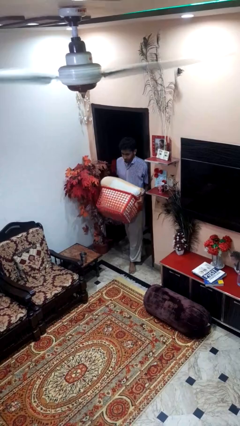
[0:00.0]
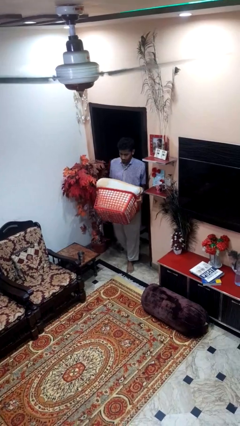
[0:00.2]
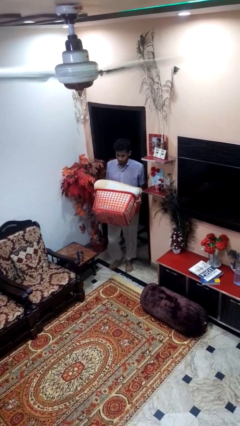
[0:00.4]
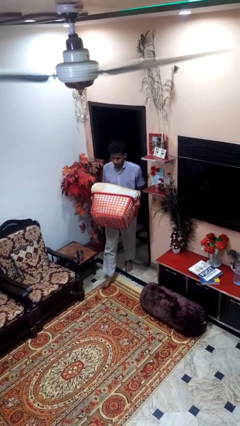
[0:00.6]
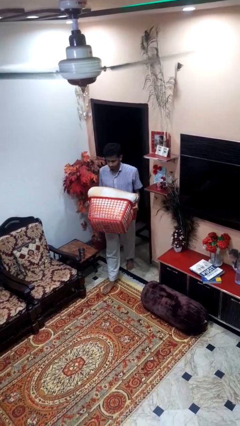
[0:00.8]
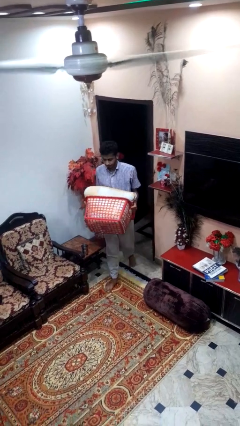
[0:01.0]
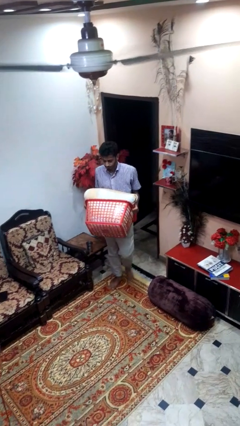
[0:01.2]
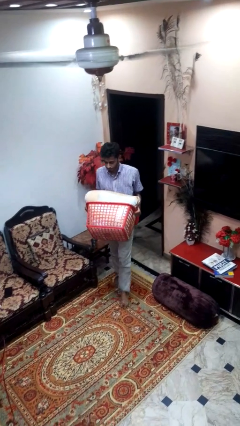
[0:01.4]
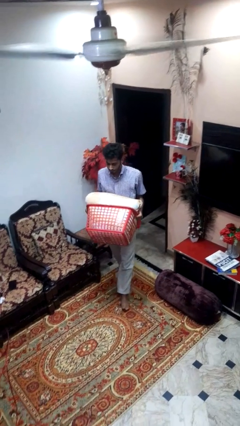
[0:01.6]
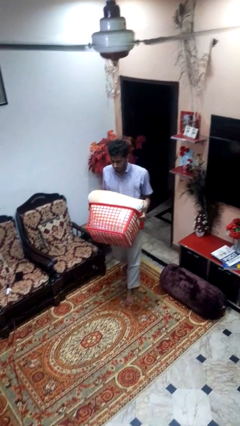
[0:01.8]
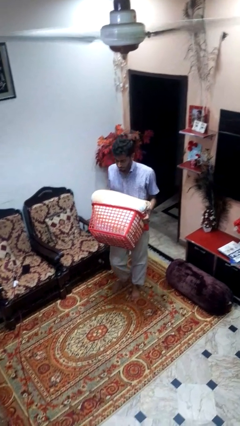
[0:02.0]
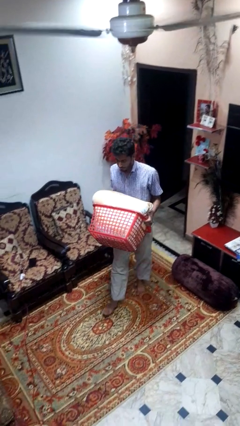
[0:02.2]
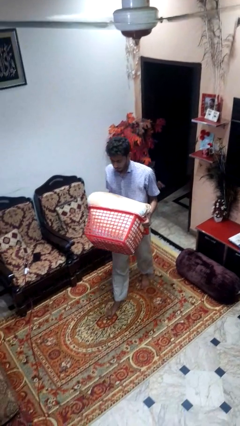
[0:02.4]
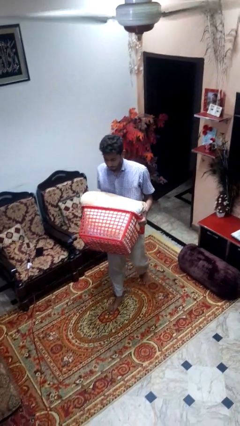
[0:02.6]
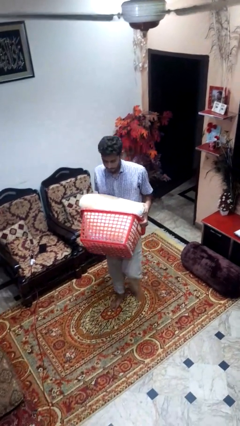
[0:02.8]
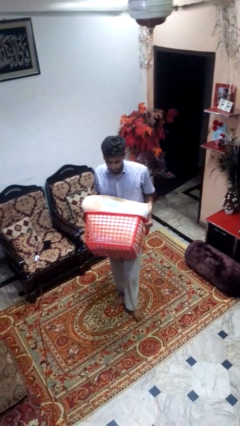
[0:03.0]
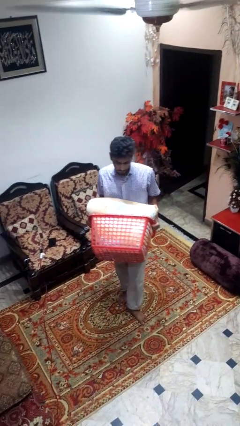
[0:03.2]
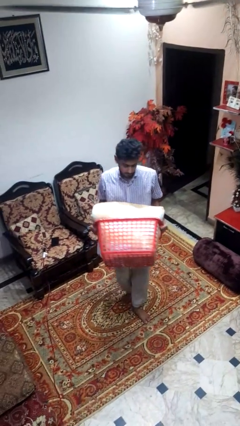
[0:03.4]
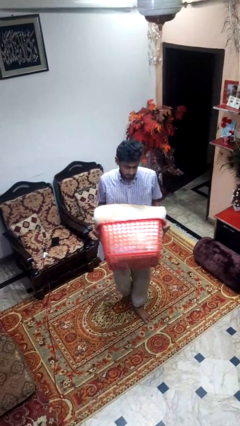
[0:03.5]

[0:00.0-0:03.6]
person carries laundry basket

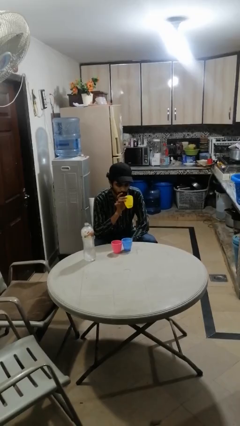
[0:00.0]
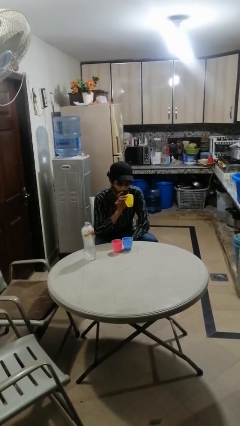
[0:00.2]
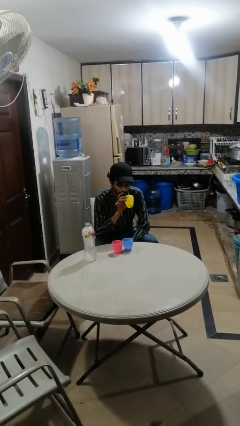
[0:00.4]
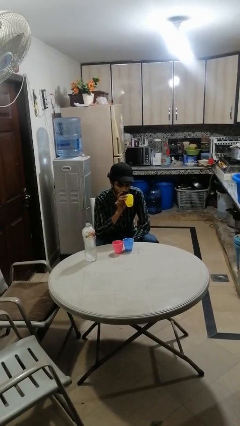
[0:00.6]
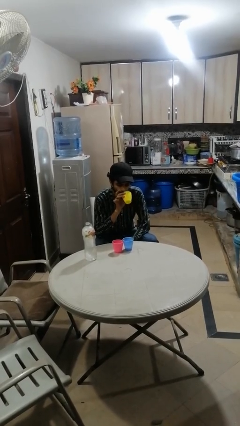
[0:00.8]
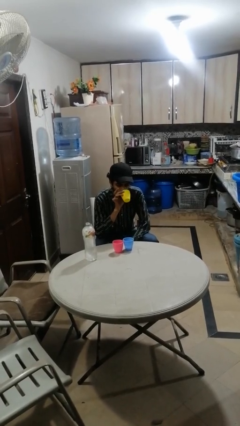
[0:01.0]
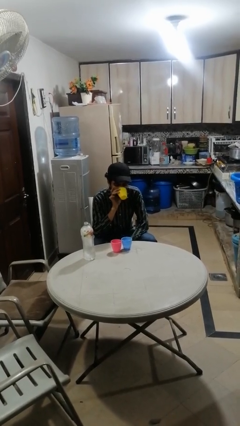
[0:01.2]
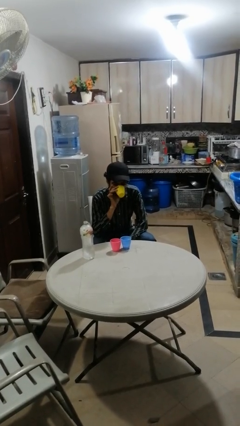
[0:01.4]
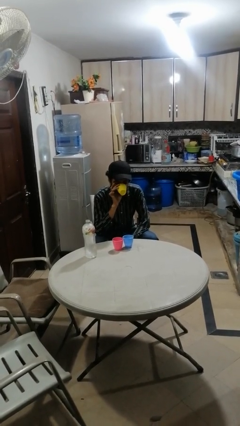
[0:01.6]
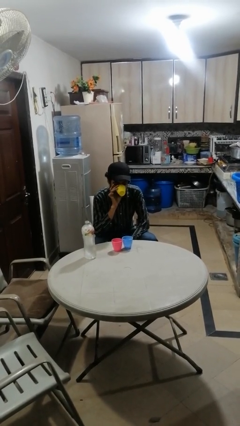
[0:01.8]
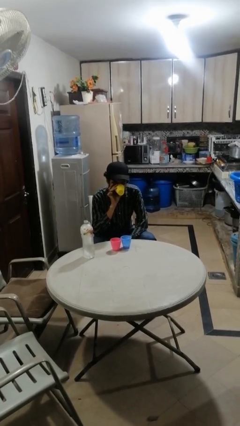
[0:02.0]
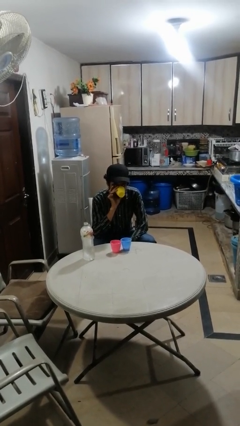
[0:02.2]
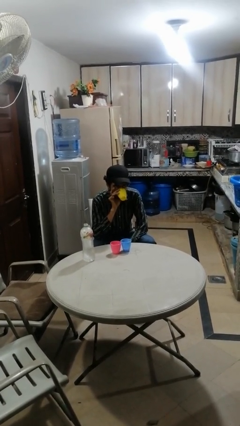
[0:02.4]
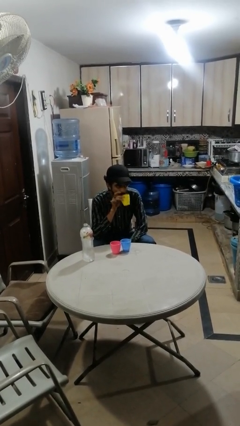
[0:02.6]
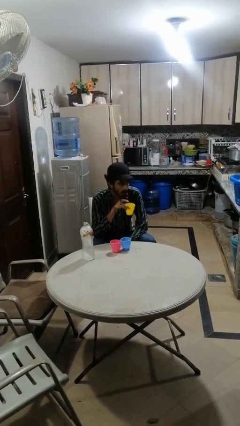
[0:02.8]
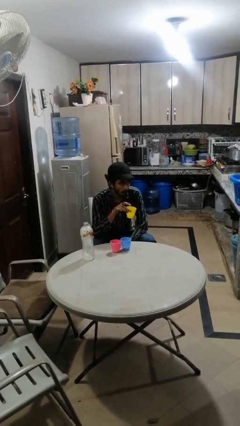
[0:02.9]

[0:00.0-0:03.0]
person drinks from shotglass

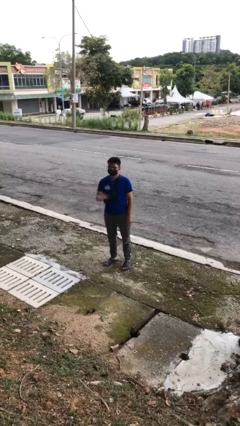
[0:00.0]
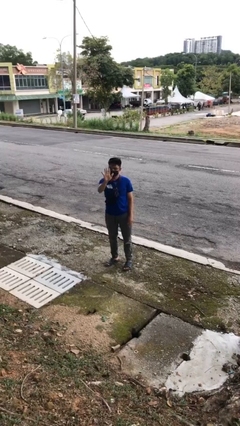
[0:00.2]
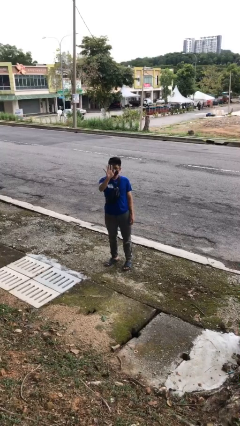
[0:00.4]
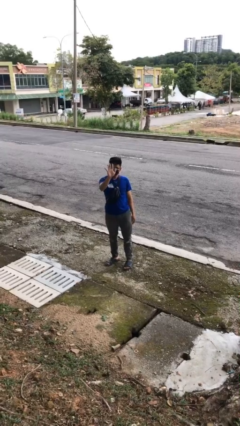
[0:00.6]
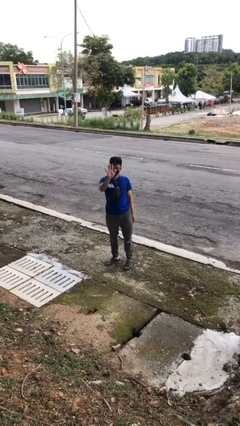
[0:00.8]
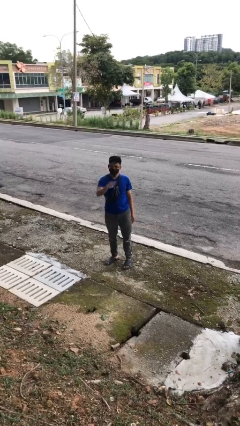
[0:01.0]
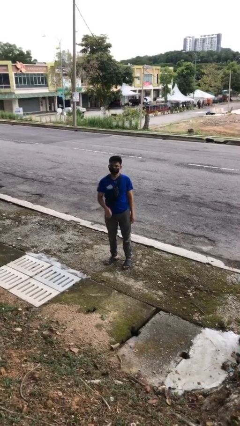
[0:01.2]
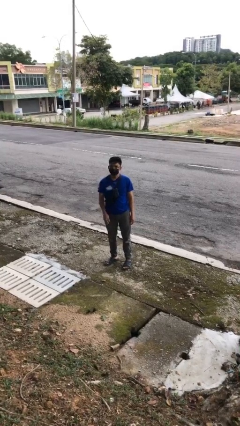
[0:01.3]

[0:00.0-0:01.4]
person gestures stop

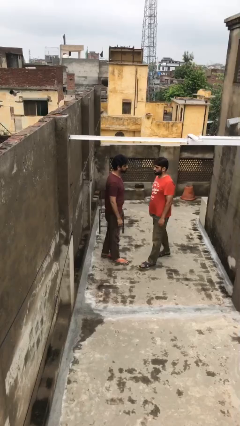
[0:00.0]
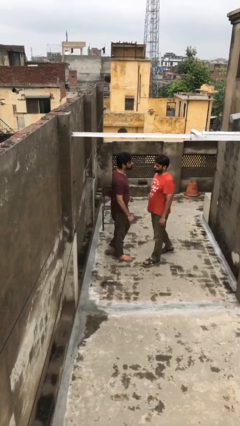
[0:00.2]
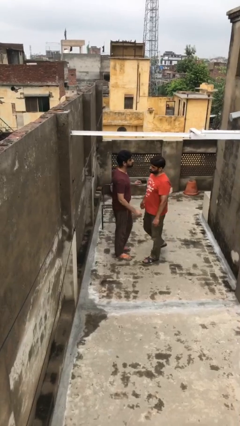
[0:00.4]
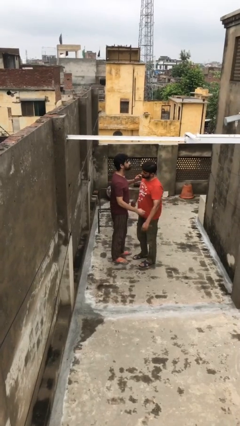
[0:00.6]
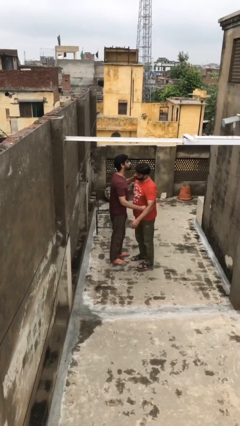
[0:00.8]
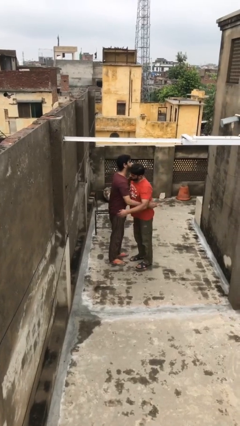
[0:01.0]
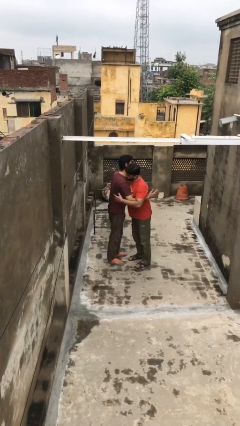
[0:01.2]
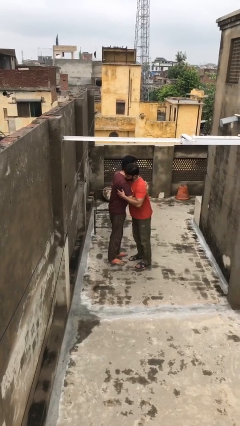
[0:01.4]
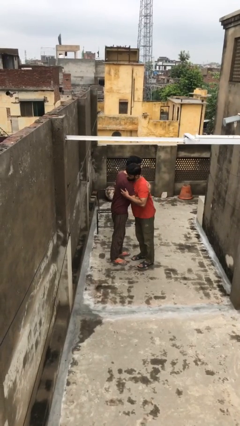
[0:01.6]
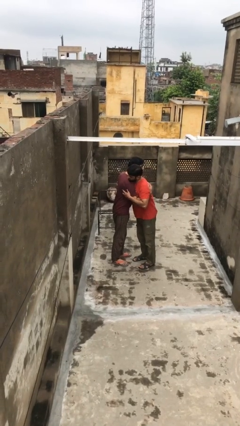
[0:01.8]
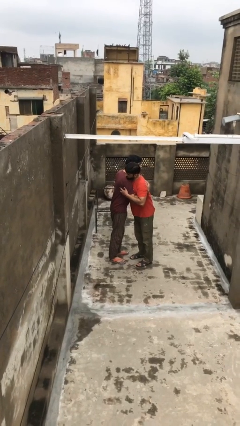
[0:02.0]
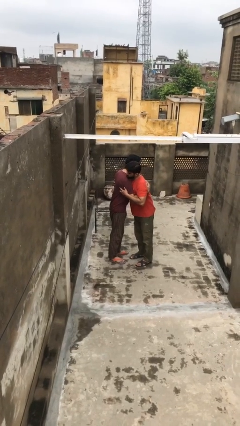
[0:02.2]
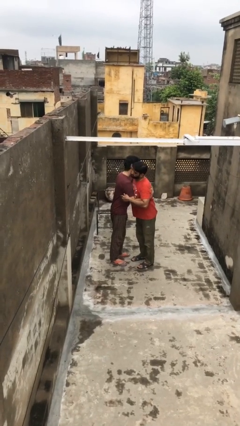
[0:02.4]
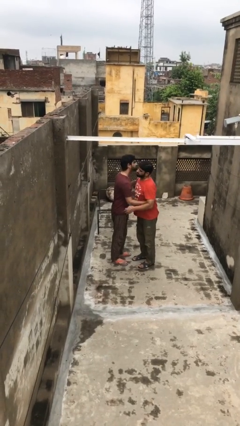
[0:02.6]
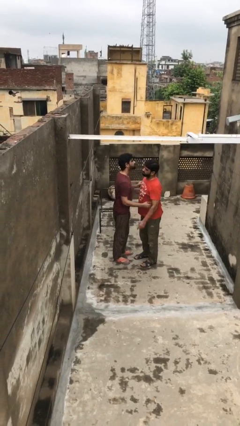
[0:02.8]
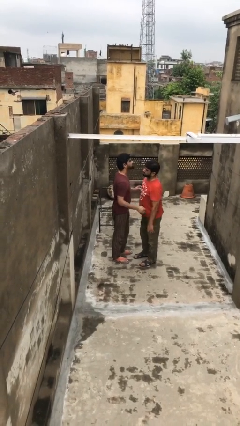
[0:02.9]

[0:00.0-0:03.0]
person embraces person

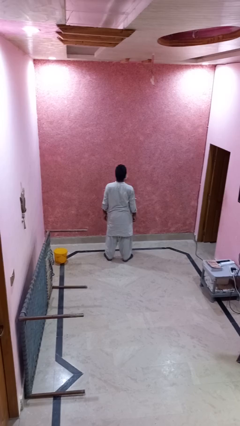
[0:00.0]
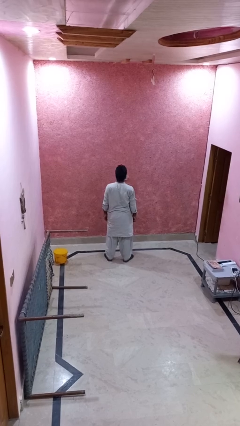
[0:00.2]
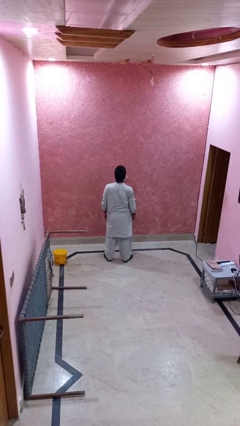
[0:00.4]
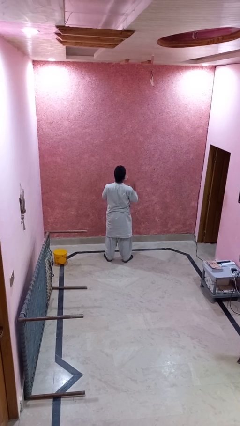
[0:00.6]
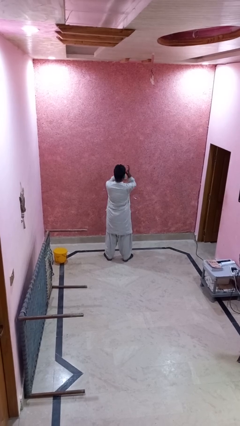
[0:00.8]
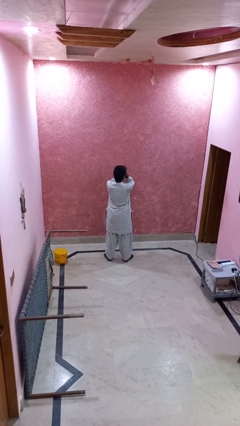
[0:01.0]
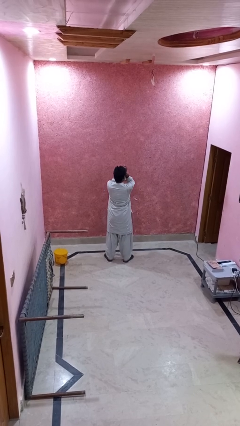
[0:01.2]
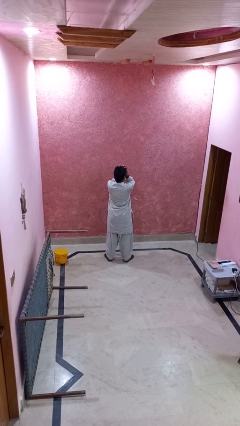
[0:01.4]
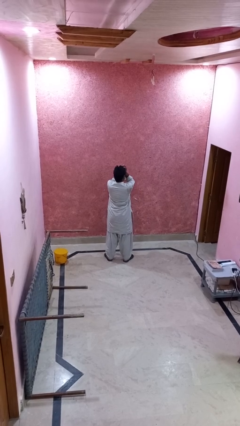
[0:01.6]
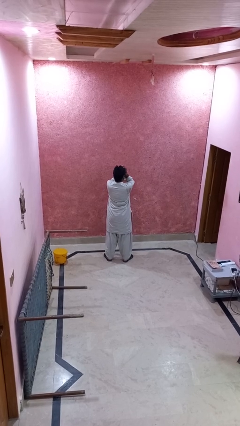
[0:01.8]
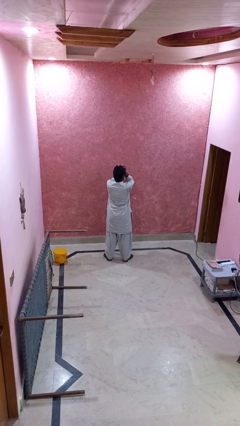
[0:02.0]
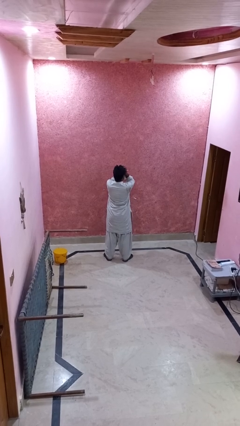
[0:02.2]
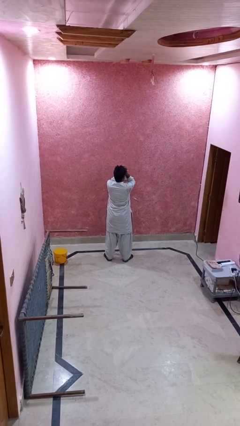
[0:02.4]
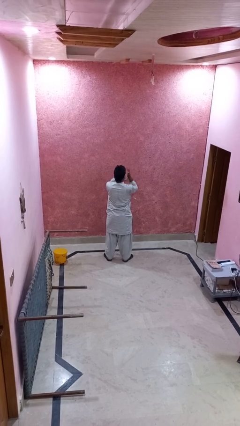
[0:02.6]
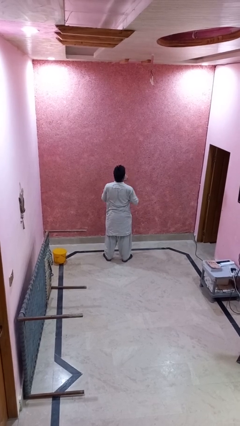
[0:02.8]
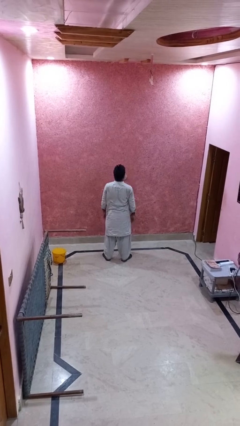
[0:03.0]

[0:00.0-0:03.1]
person rubs eyes

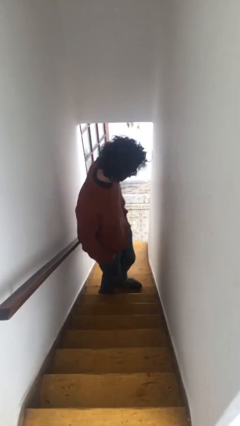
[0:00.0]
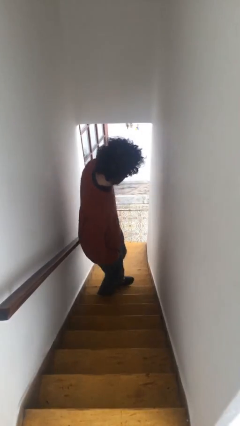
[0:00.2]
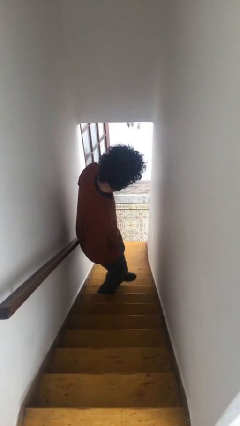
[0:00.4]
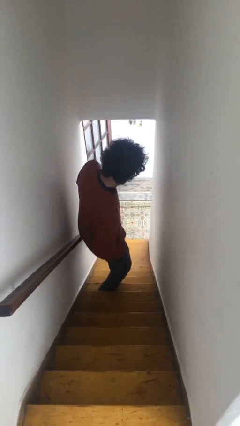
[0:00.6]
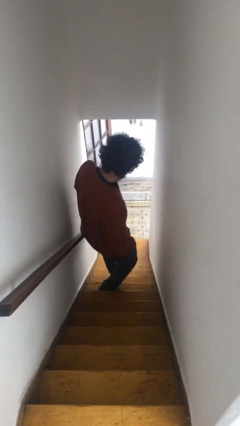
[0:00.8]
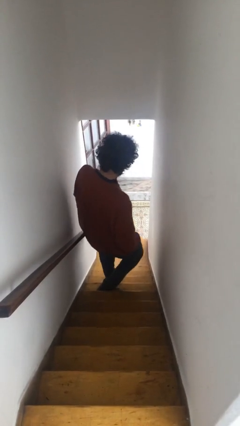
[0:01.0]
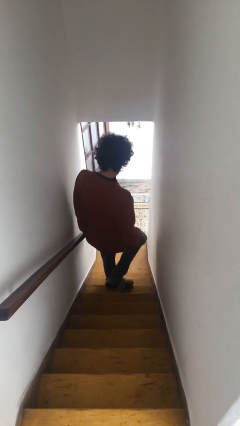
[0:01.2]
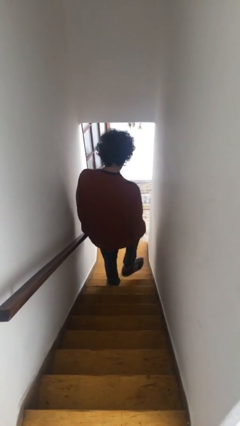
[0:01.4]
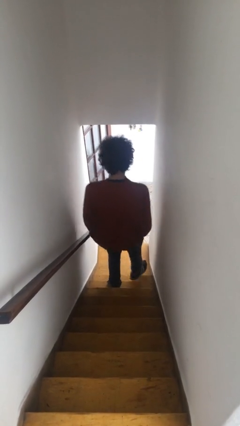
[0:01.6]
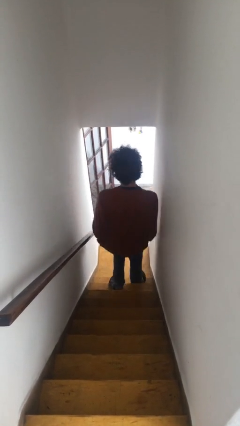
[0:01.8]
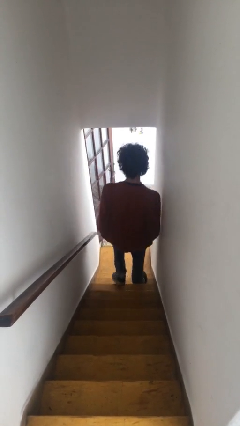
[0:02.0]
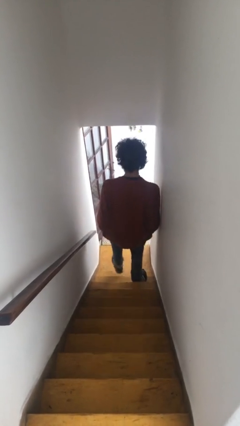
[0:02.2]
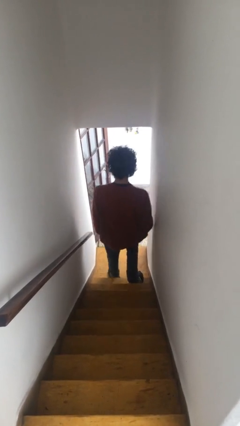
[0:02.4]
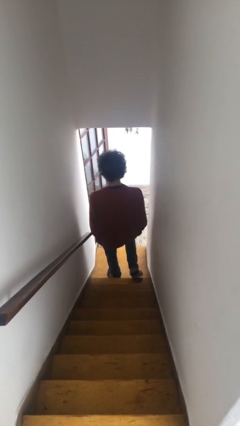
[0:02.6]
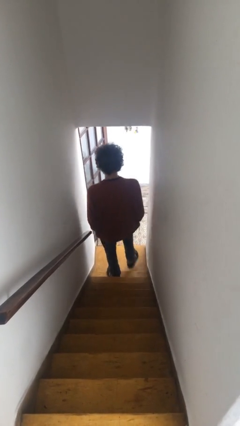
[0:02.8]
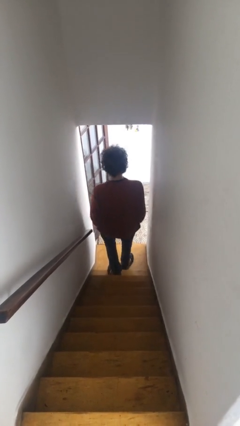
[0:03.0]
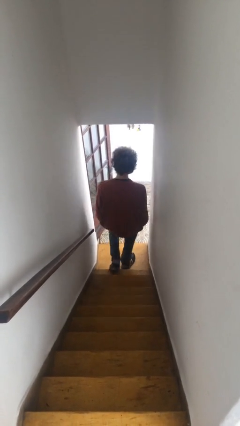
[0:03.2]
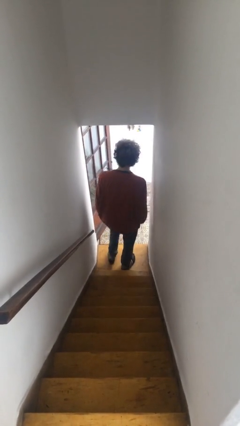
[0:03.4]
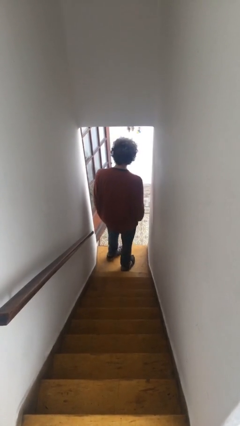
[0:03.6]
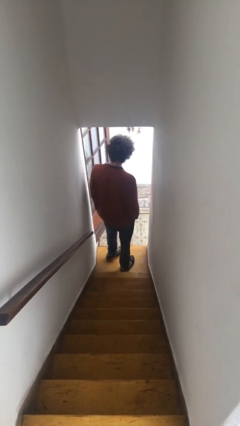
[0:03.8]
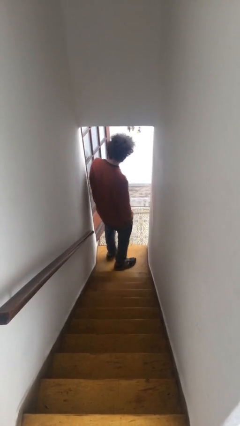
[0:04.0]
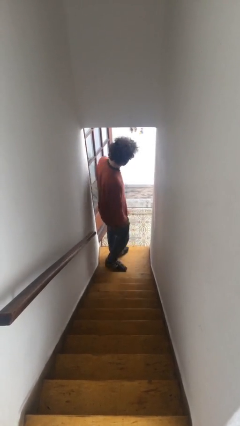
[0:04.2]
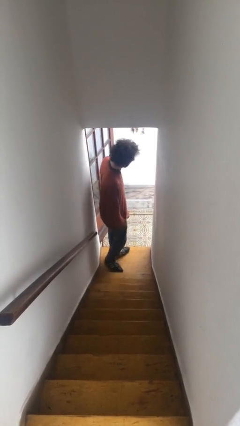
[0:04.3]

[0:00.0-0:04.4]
person climbs down stairs
